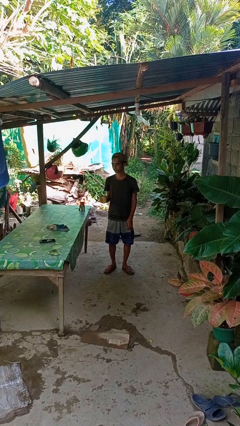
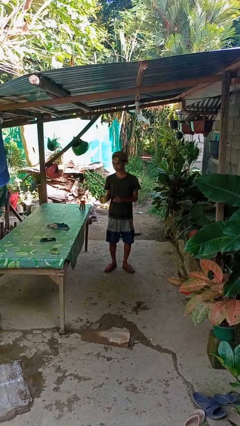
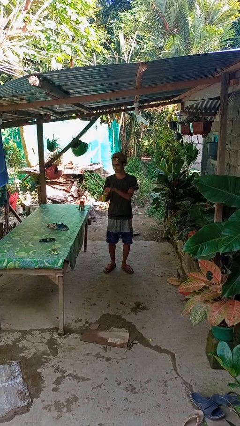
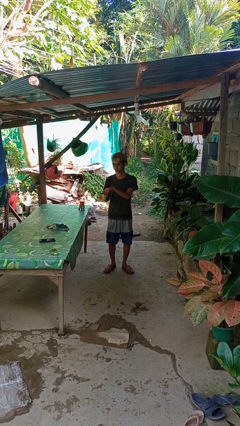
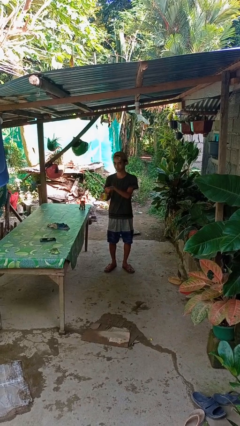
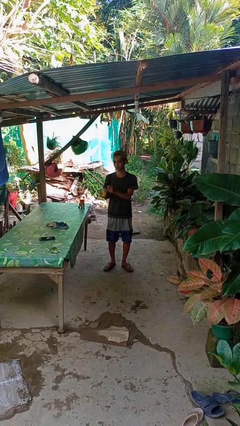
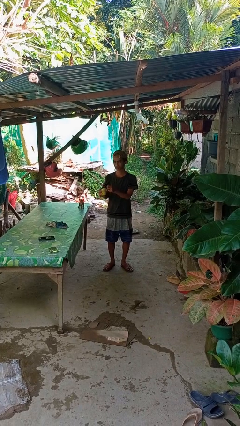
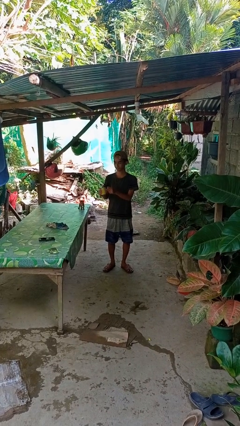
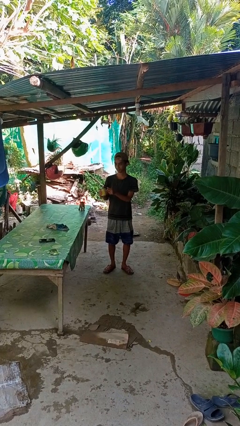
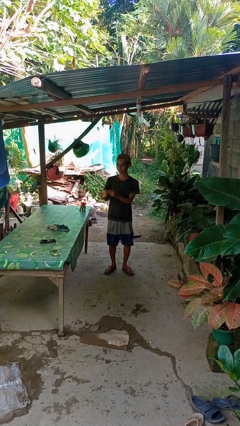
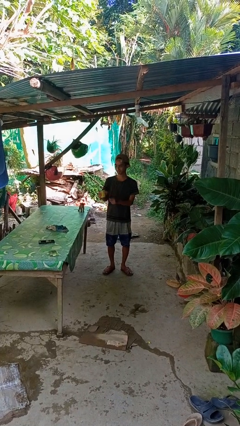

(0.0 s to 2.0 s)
person opens beverage can

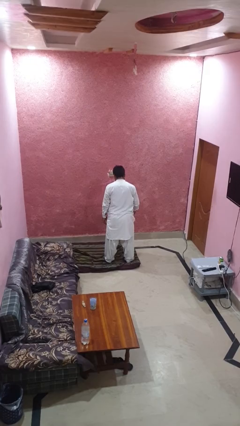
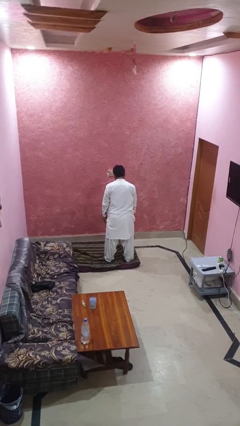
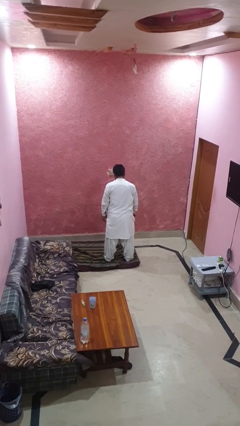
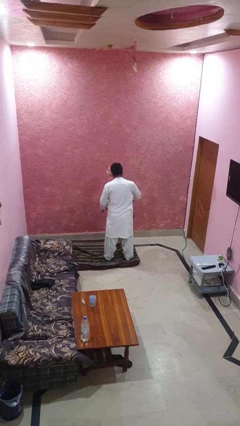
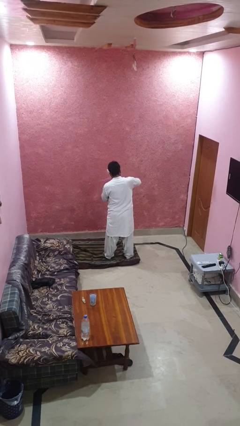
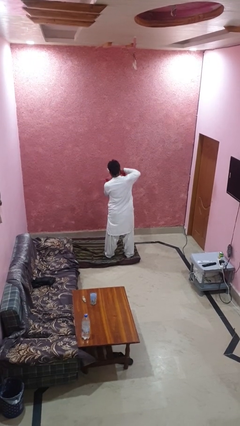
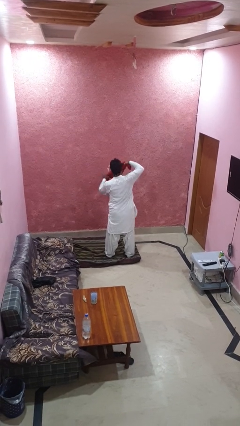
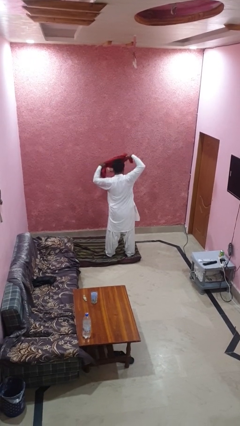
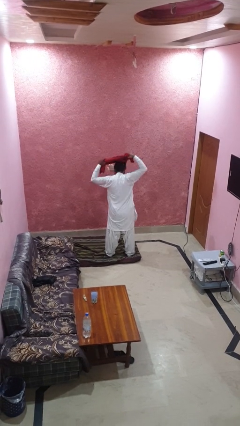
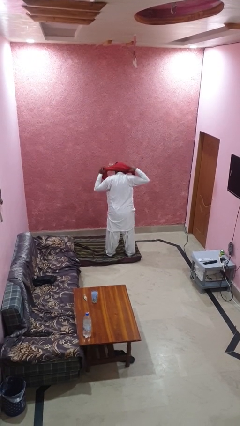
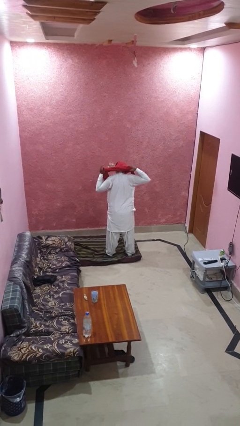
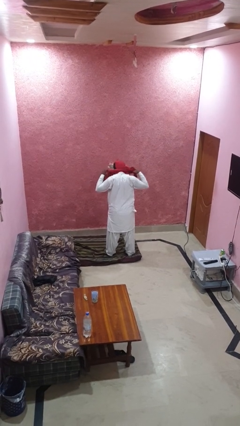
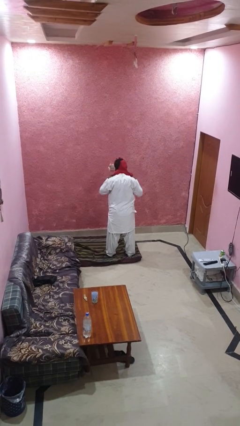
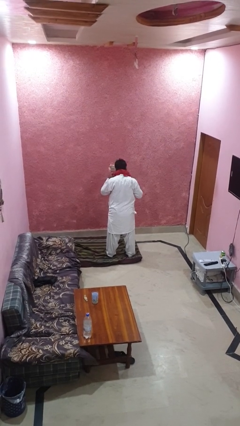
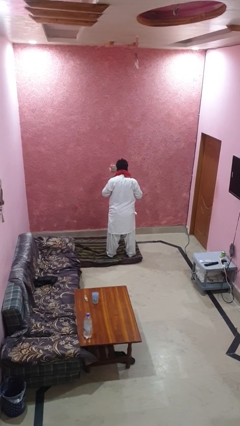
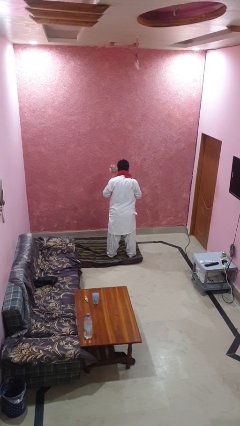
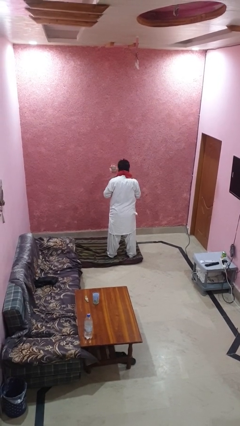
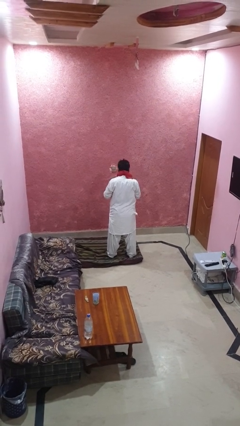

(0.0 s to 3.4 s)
person puts on scarf

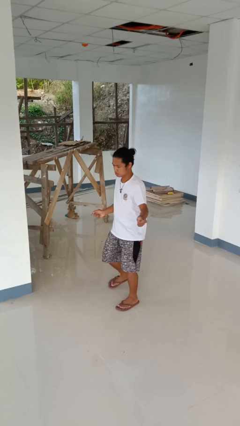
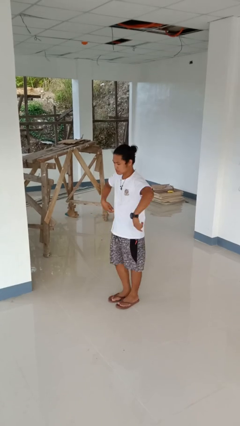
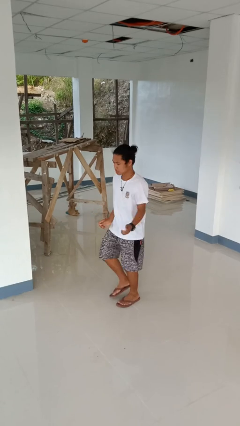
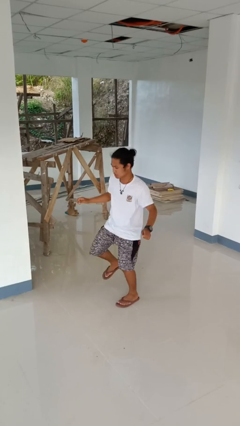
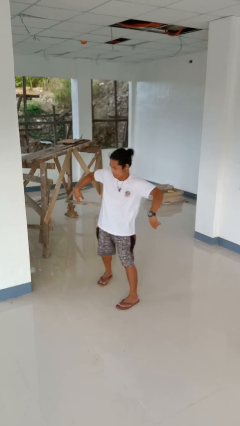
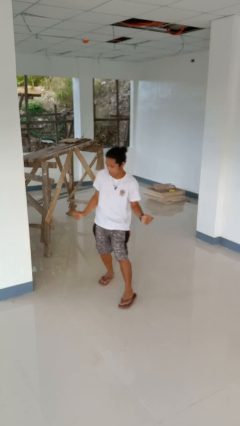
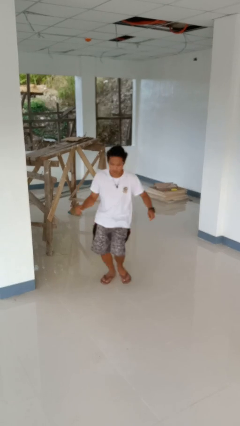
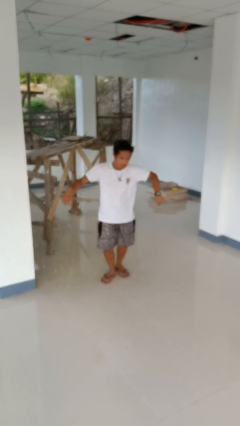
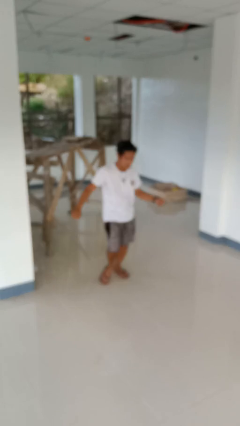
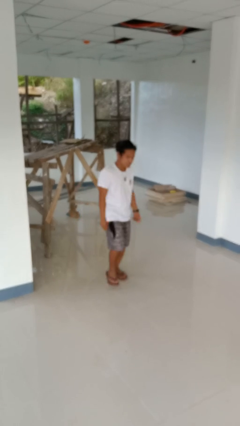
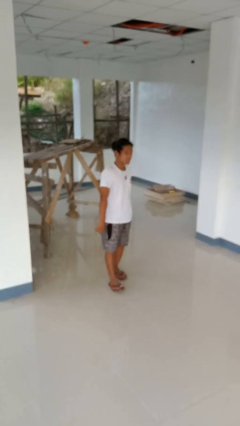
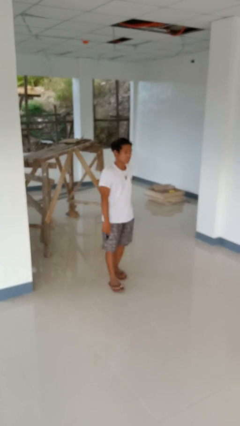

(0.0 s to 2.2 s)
person dances in place

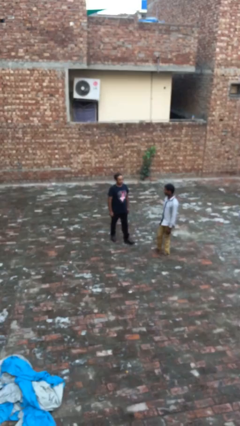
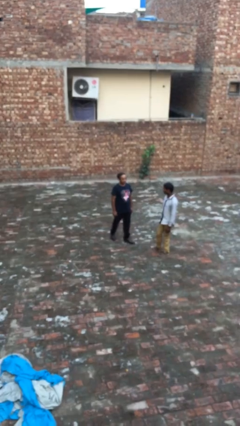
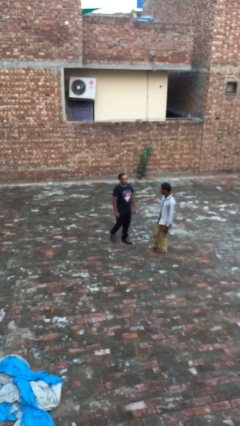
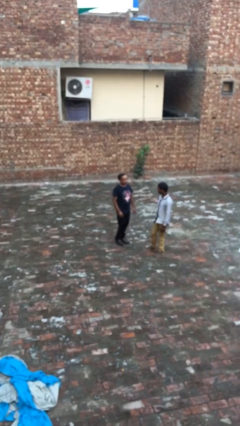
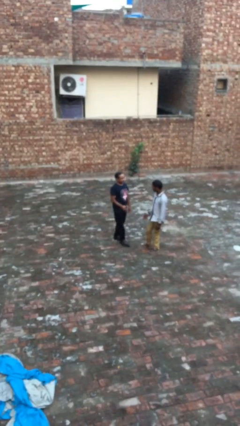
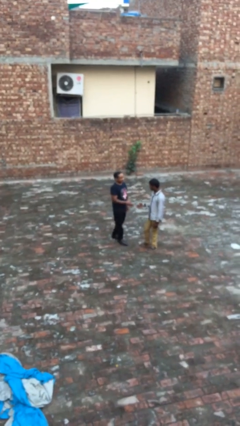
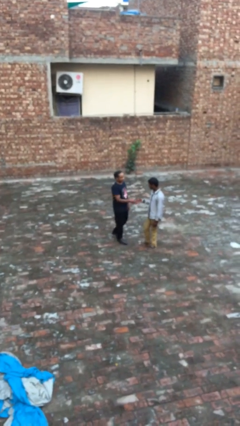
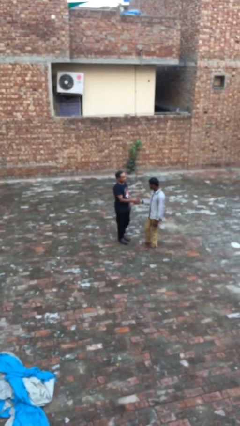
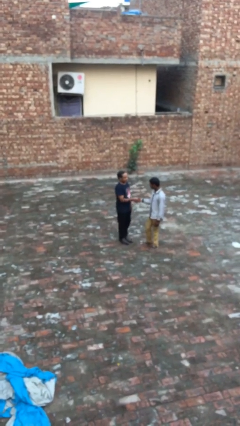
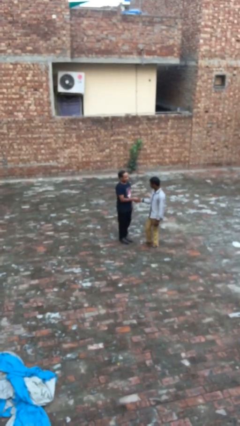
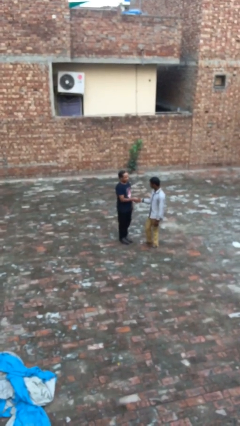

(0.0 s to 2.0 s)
person shakes hand

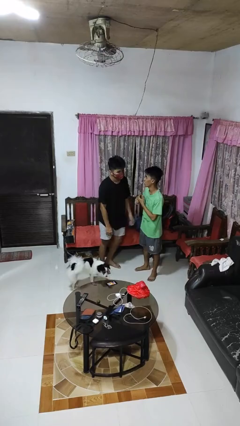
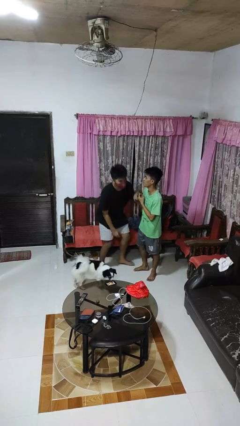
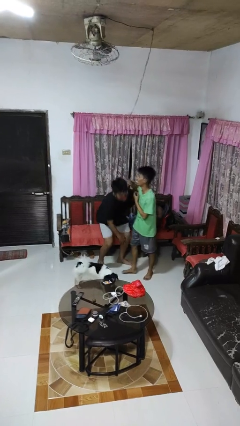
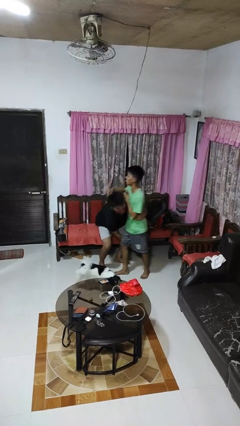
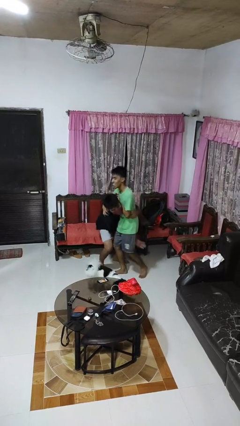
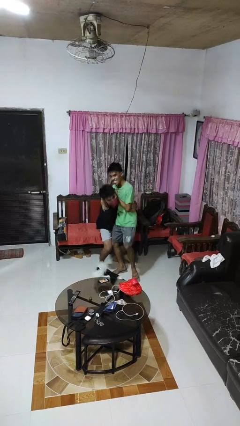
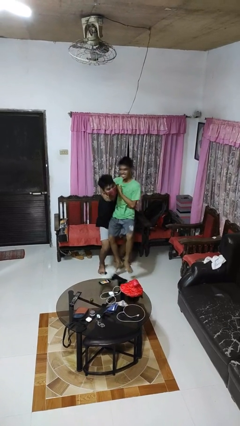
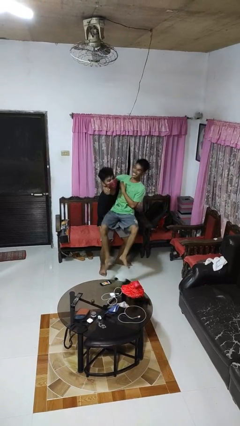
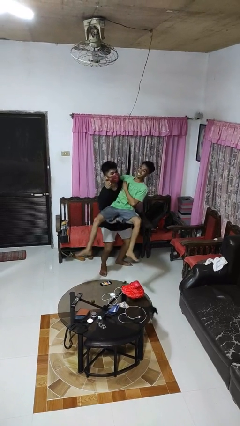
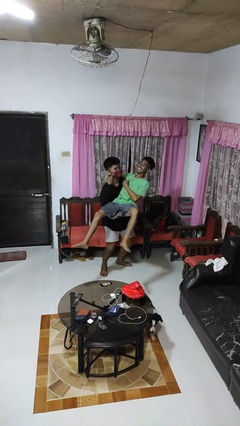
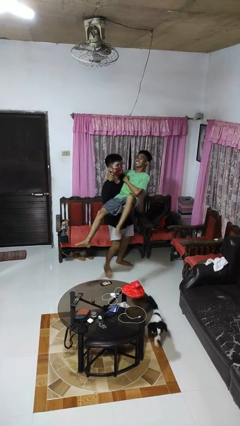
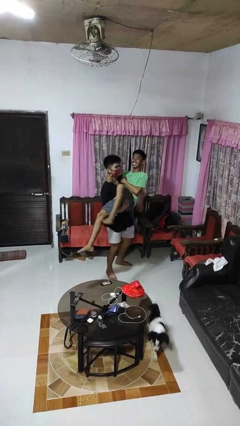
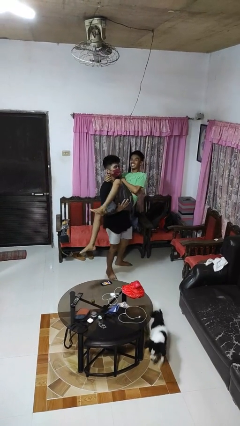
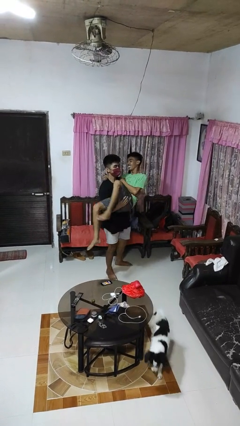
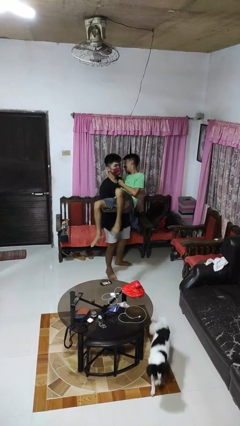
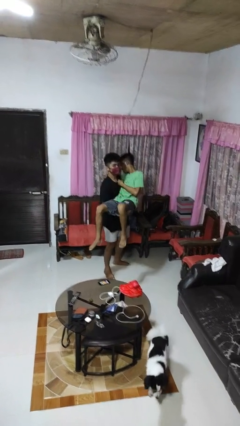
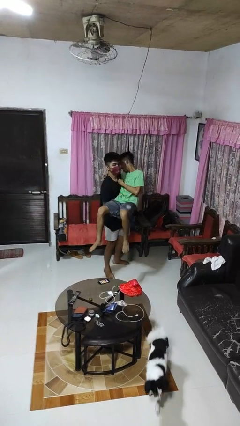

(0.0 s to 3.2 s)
person picks up person

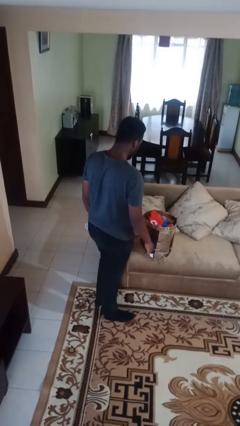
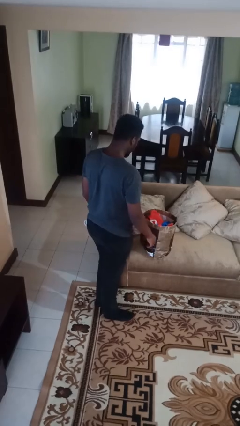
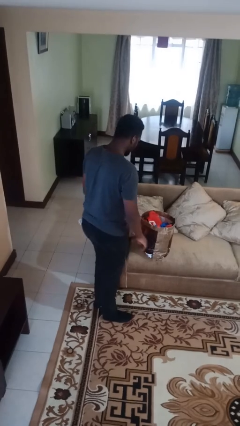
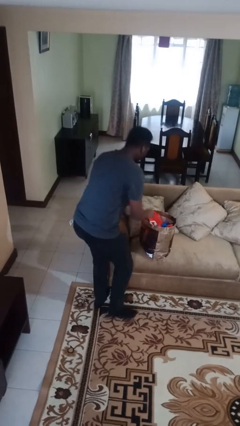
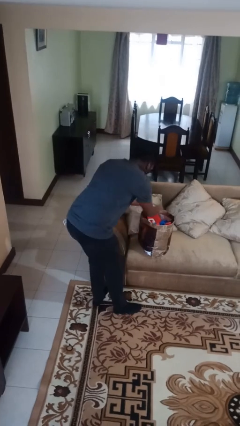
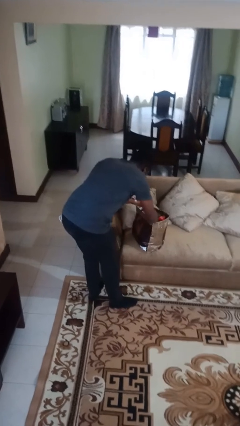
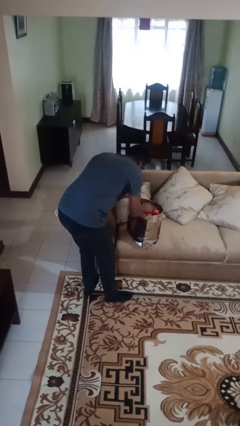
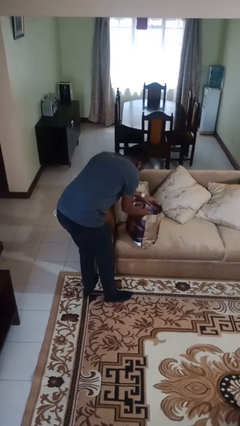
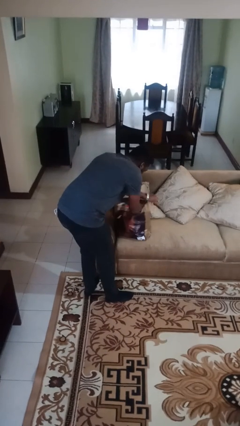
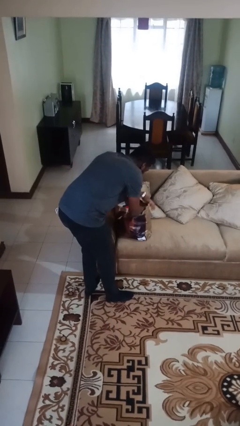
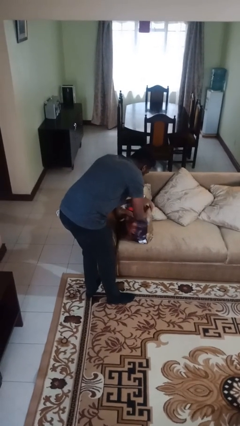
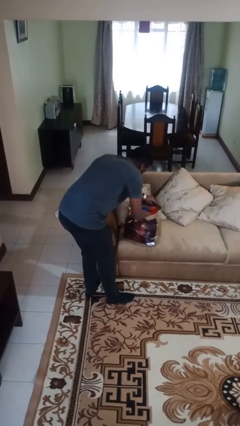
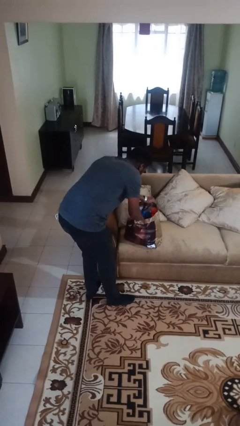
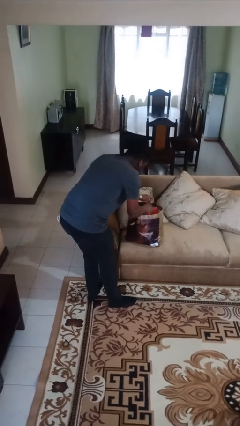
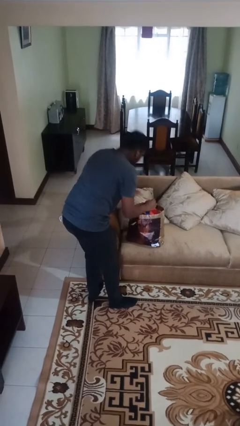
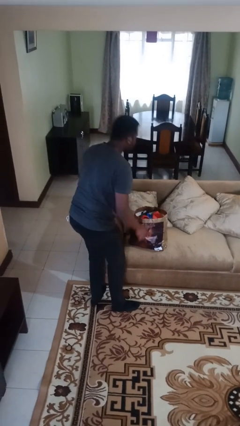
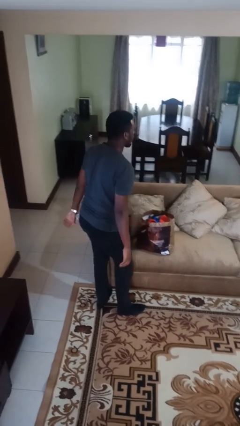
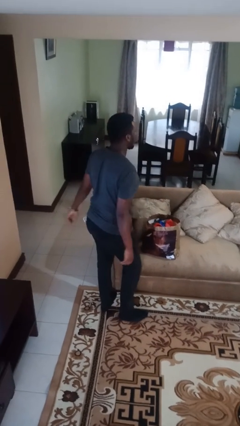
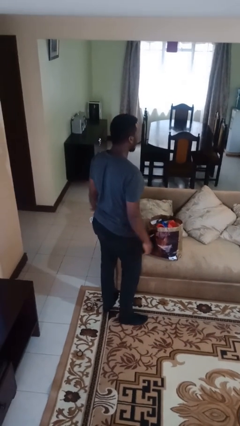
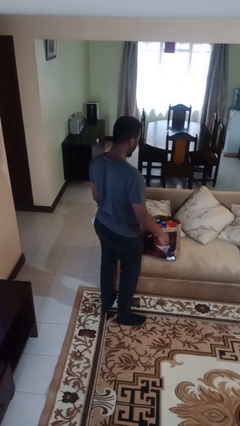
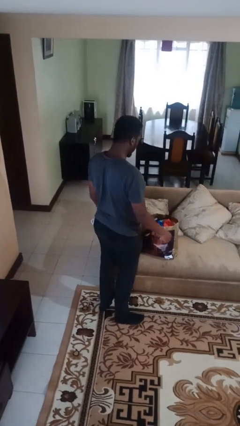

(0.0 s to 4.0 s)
person searches in bag

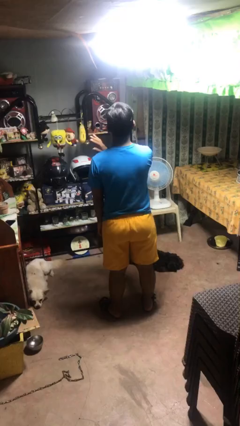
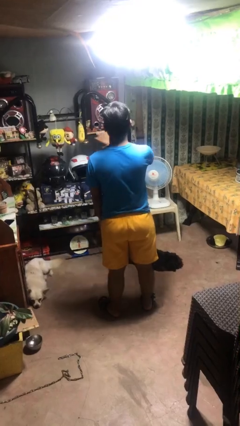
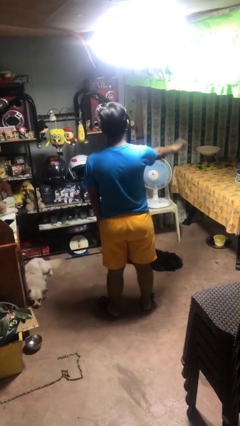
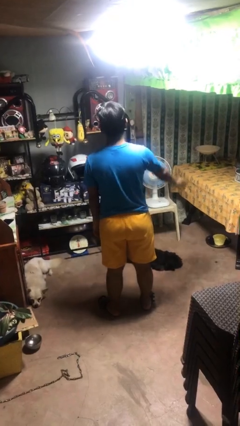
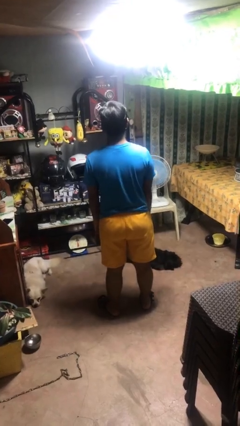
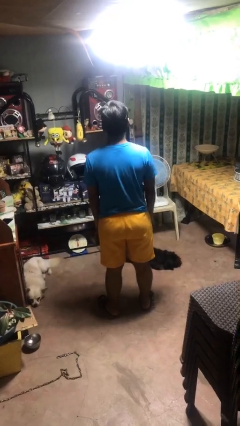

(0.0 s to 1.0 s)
person gestures swipe right
